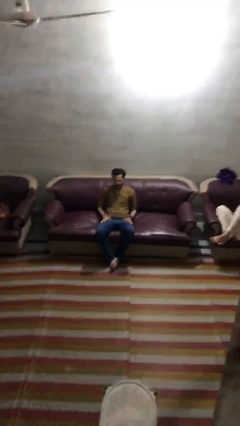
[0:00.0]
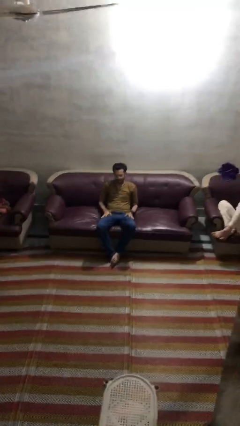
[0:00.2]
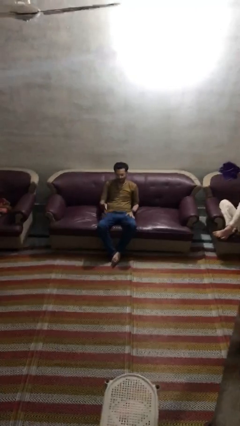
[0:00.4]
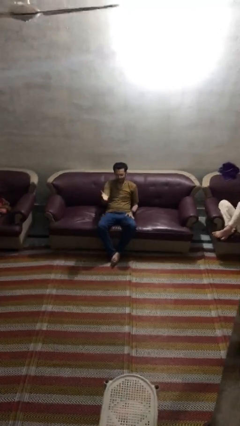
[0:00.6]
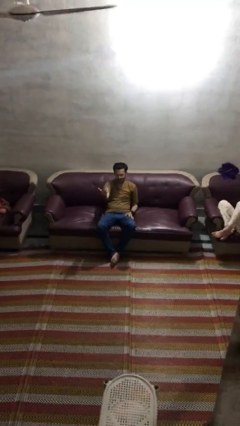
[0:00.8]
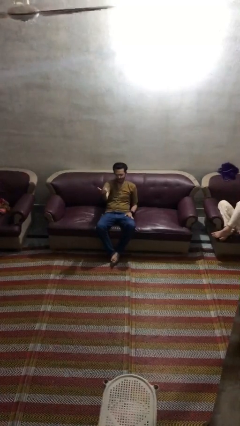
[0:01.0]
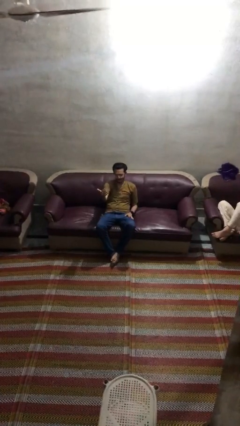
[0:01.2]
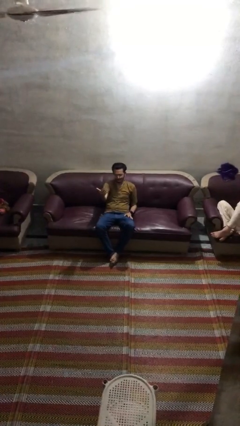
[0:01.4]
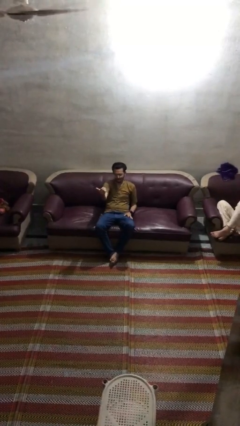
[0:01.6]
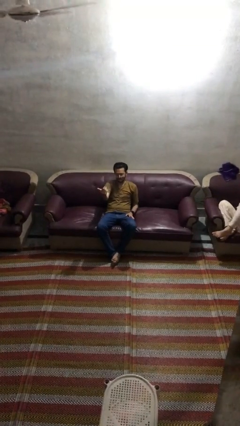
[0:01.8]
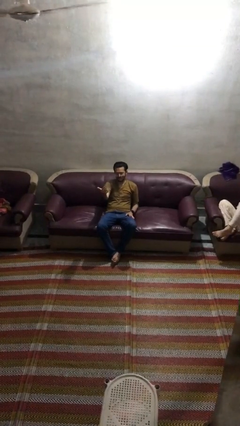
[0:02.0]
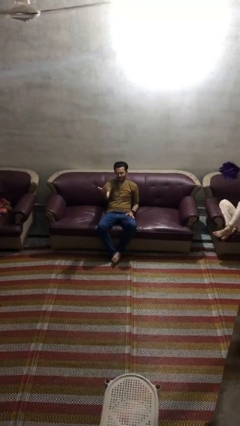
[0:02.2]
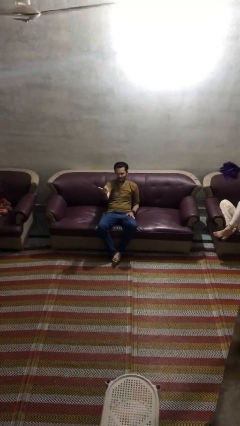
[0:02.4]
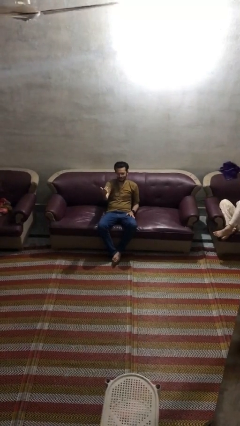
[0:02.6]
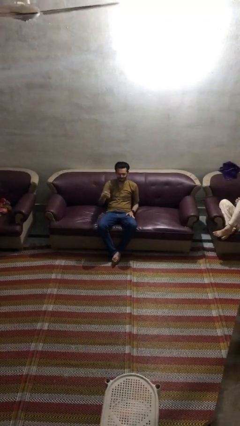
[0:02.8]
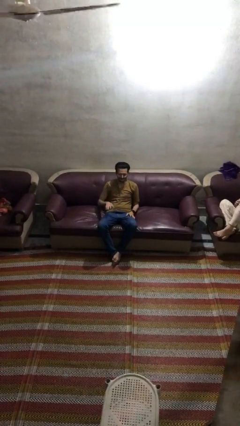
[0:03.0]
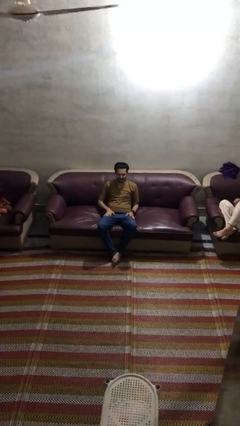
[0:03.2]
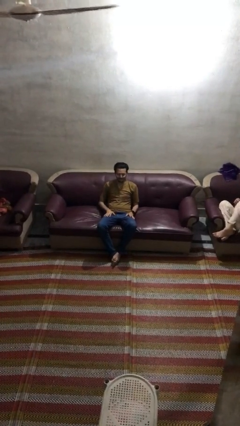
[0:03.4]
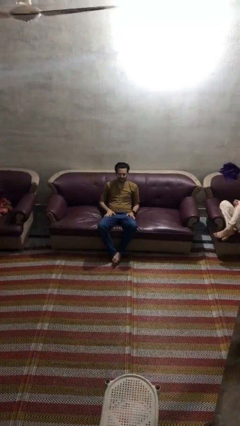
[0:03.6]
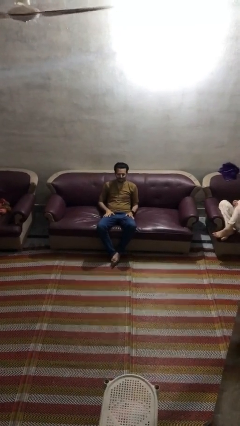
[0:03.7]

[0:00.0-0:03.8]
person gestures come here

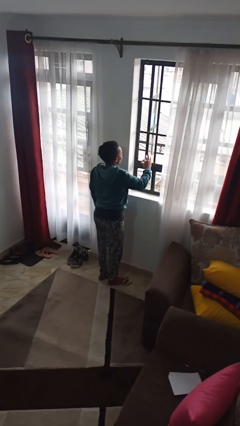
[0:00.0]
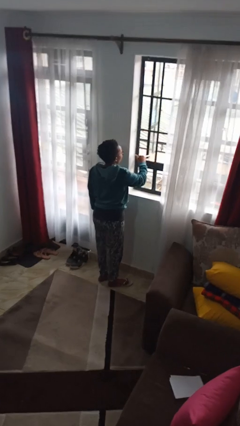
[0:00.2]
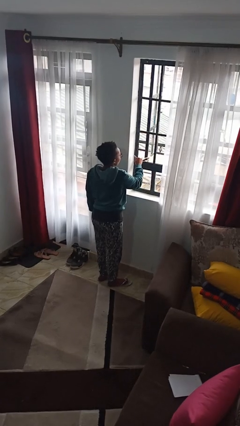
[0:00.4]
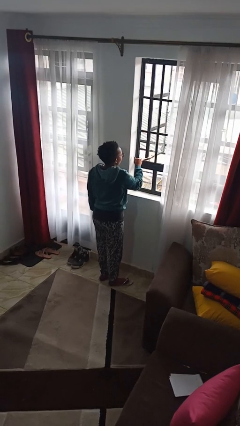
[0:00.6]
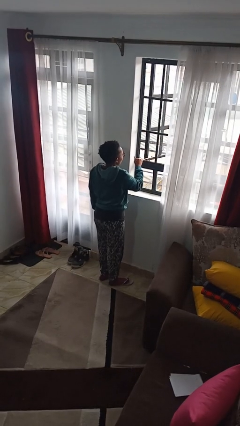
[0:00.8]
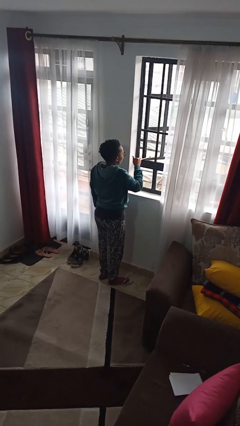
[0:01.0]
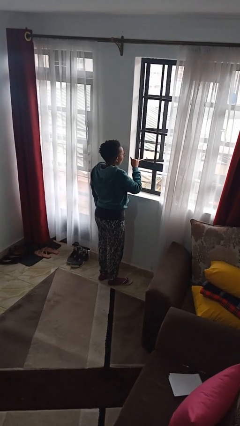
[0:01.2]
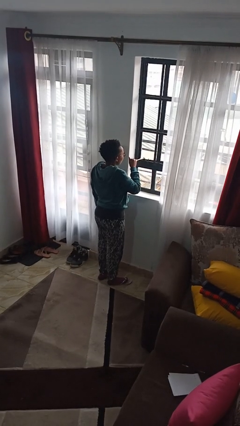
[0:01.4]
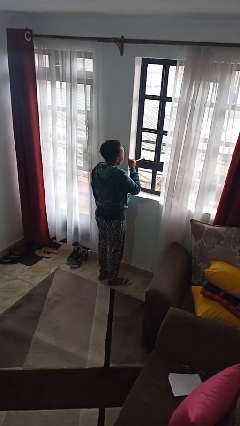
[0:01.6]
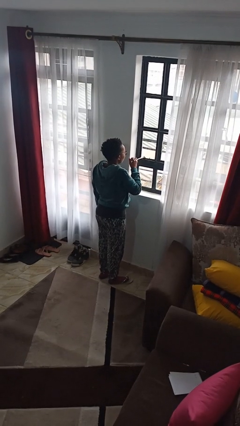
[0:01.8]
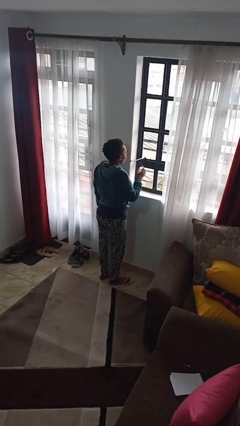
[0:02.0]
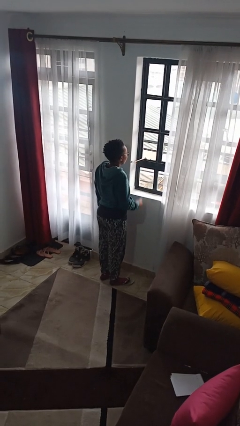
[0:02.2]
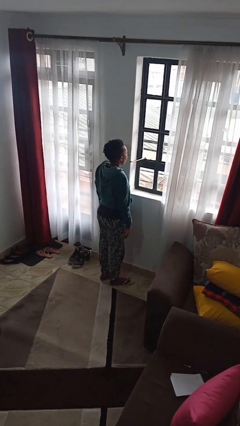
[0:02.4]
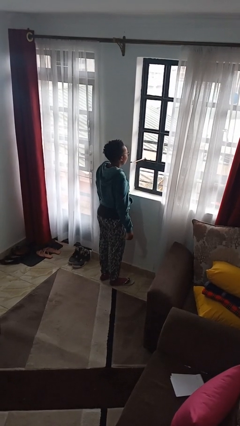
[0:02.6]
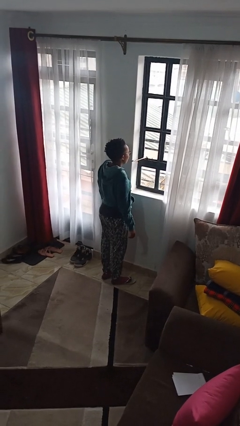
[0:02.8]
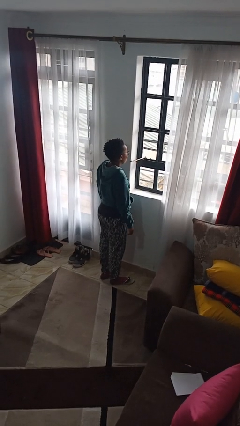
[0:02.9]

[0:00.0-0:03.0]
person closes home window

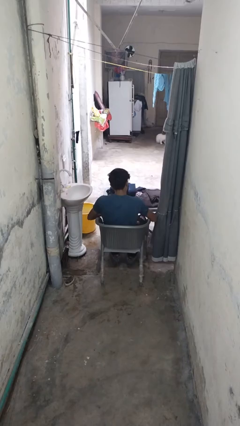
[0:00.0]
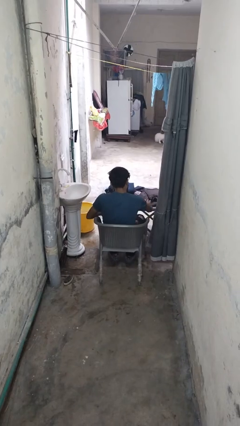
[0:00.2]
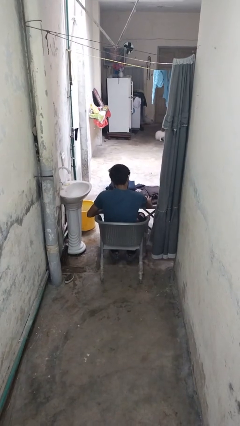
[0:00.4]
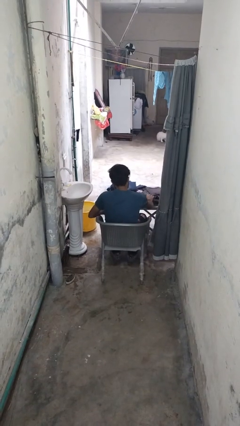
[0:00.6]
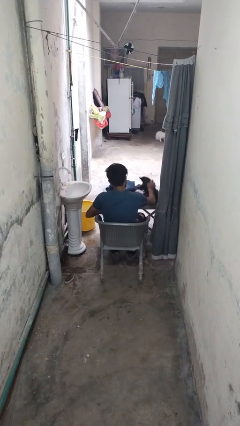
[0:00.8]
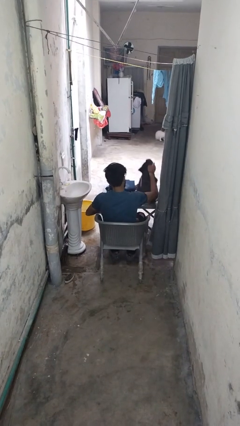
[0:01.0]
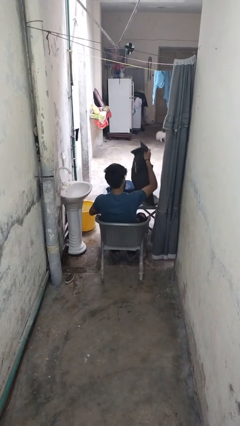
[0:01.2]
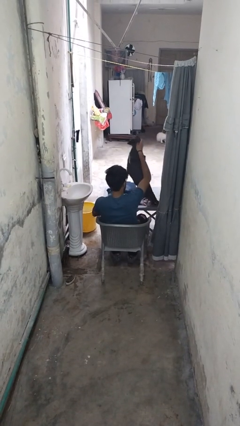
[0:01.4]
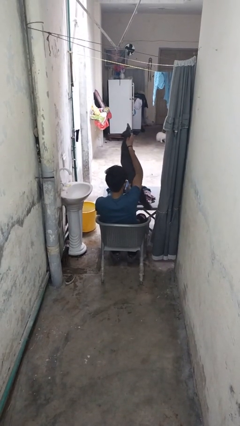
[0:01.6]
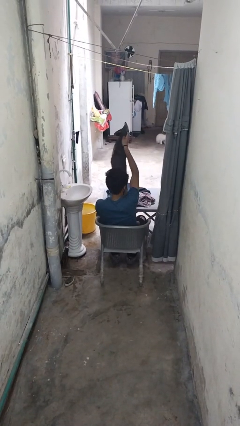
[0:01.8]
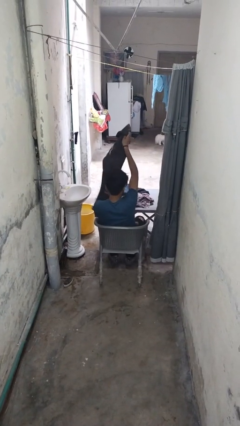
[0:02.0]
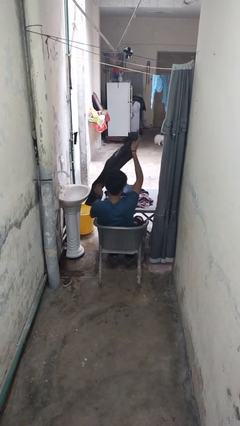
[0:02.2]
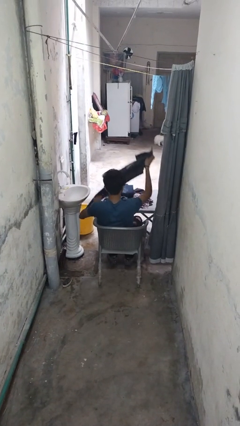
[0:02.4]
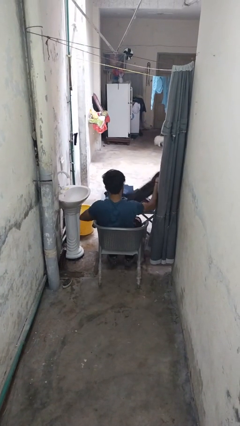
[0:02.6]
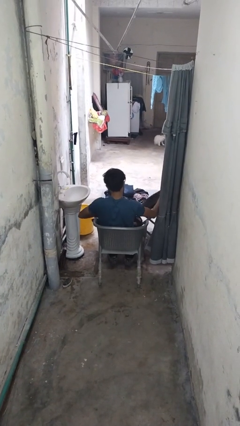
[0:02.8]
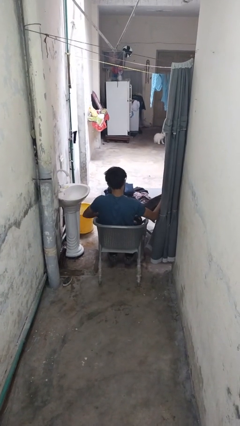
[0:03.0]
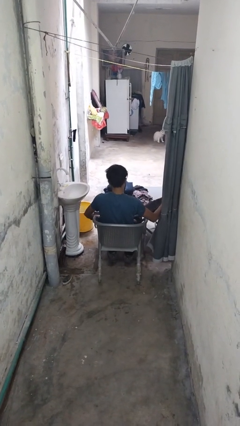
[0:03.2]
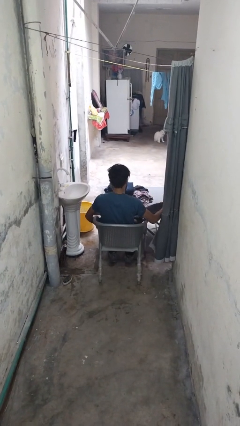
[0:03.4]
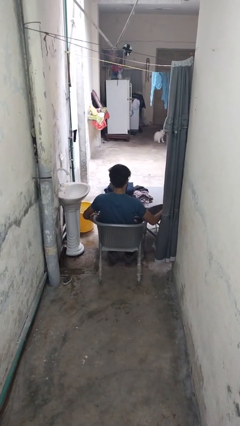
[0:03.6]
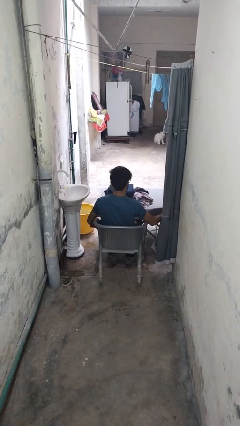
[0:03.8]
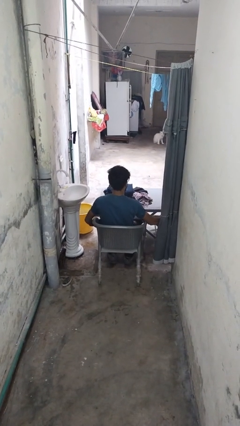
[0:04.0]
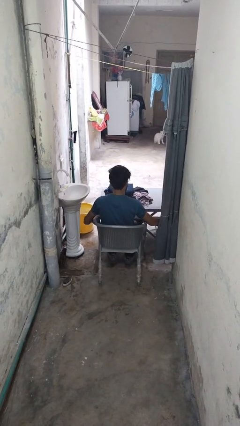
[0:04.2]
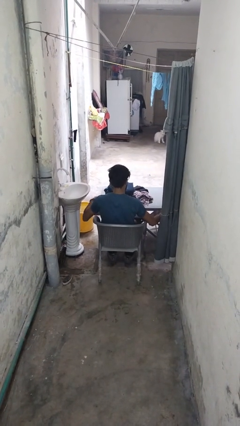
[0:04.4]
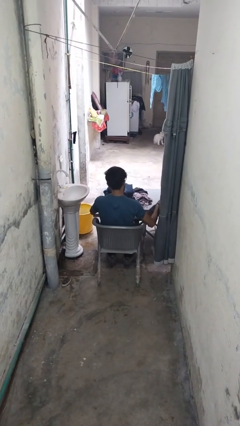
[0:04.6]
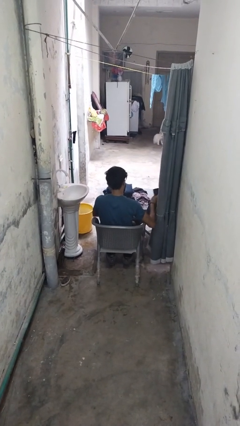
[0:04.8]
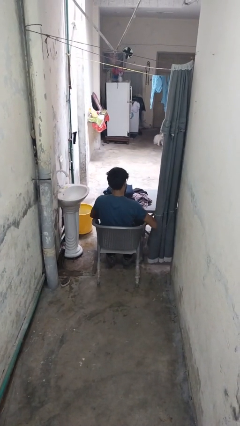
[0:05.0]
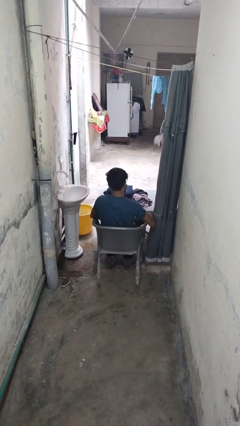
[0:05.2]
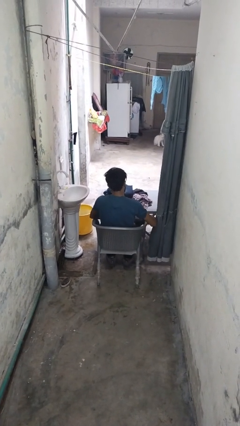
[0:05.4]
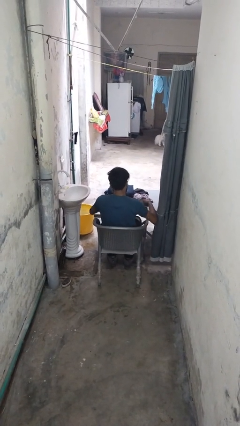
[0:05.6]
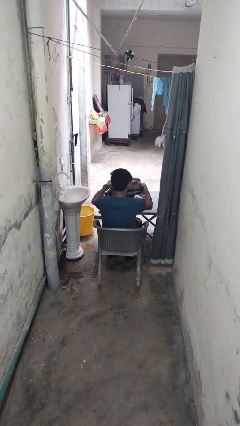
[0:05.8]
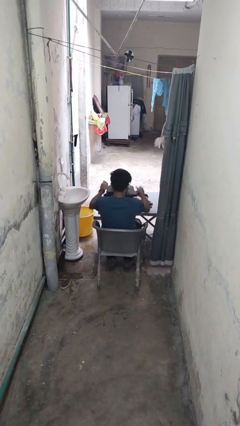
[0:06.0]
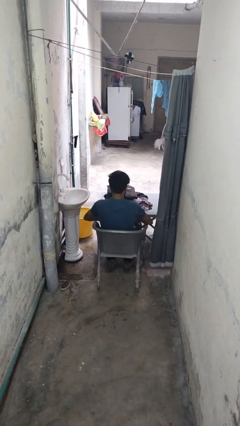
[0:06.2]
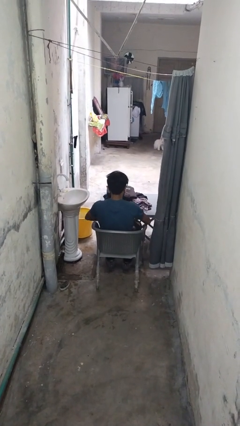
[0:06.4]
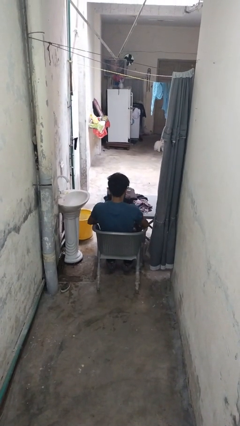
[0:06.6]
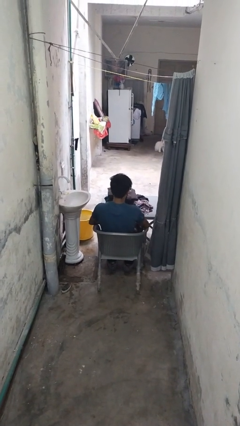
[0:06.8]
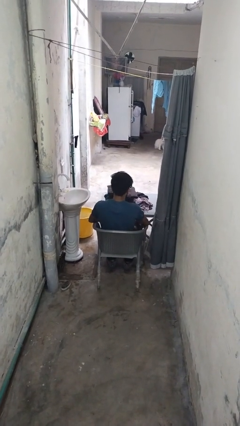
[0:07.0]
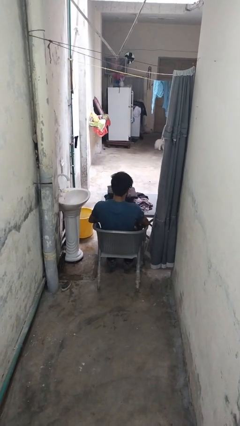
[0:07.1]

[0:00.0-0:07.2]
person folds pants

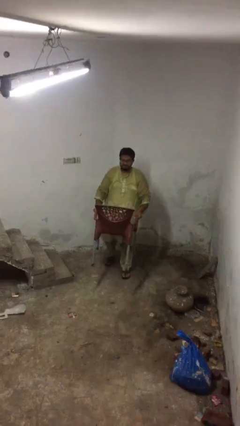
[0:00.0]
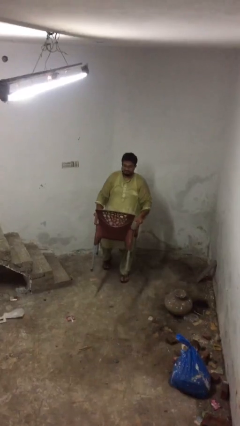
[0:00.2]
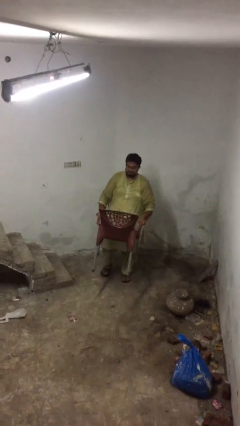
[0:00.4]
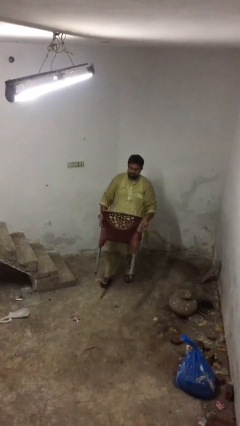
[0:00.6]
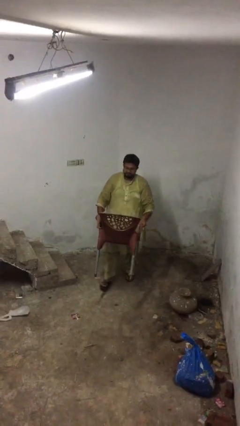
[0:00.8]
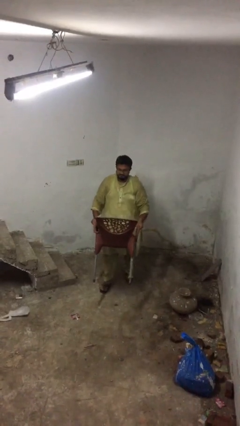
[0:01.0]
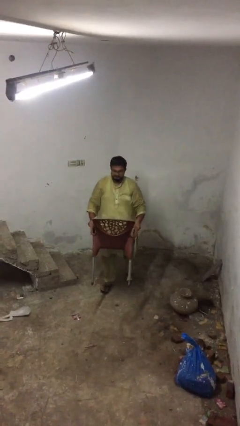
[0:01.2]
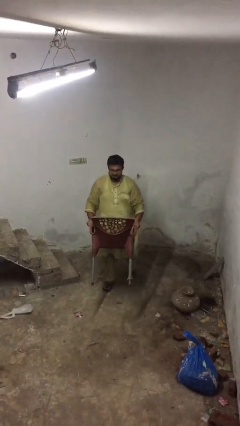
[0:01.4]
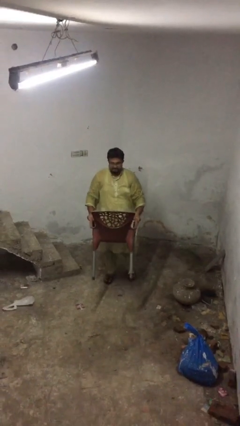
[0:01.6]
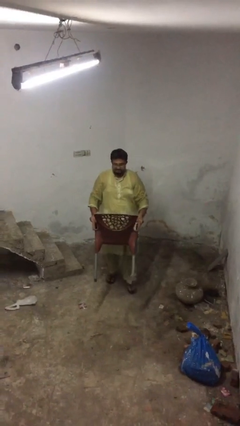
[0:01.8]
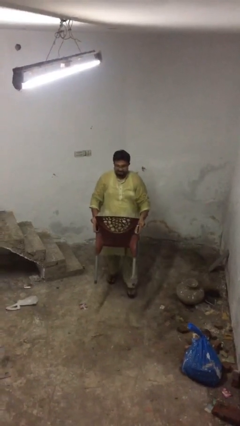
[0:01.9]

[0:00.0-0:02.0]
person puts down object on floor

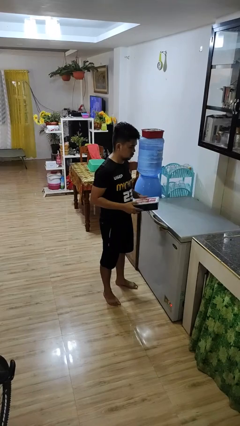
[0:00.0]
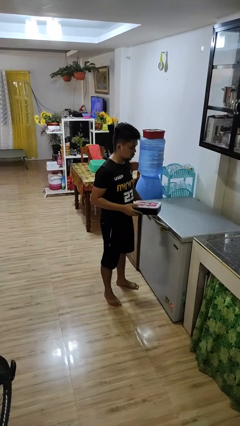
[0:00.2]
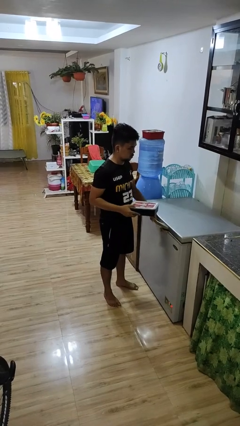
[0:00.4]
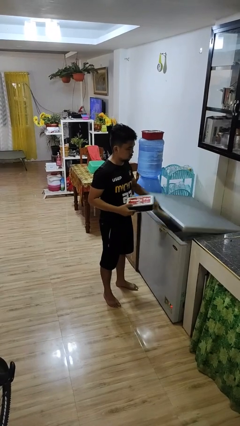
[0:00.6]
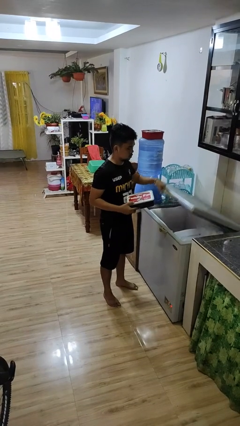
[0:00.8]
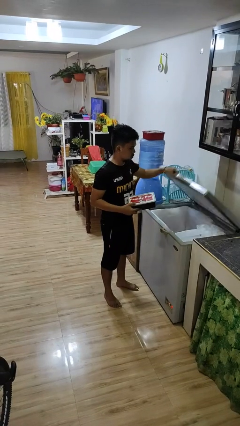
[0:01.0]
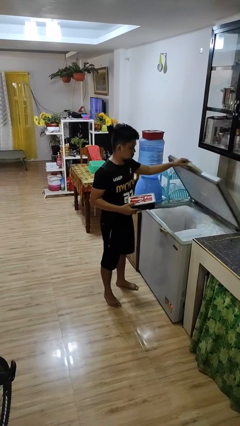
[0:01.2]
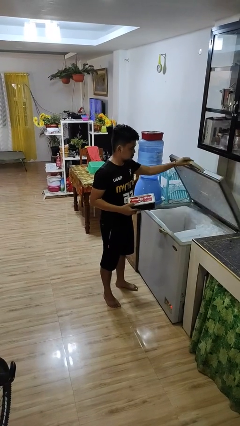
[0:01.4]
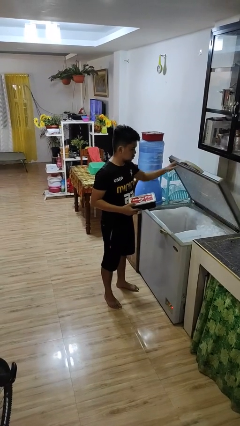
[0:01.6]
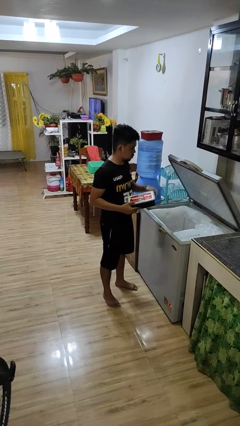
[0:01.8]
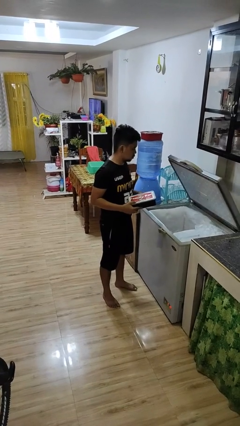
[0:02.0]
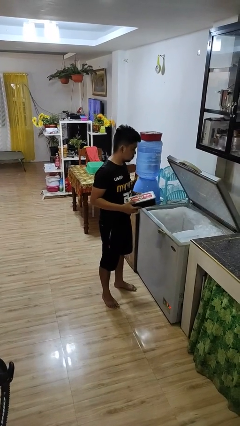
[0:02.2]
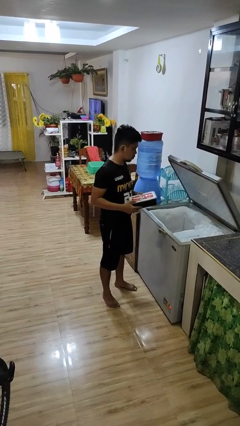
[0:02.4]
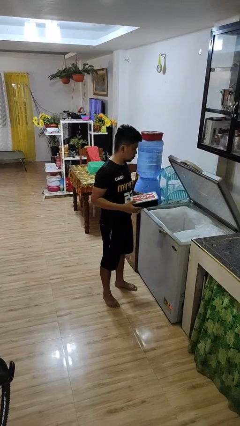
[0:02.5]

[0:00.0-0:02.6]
person opens refrigerator
